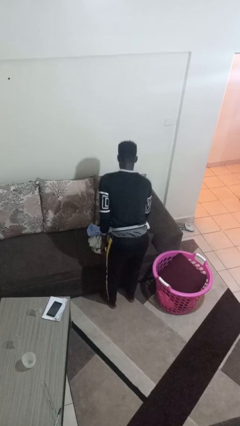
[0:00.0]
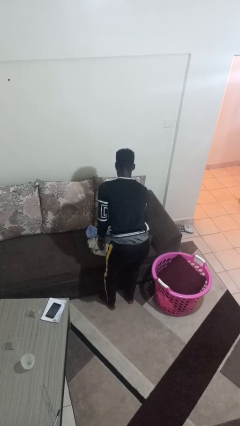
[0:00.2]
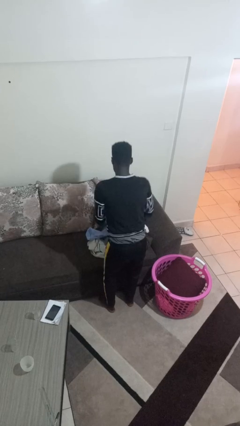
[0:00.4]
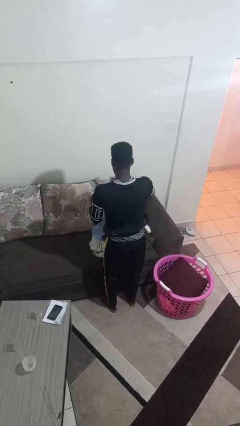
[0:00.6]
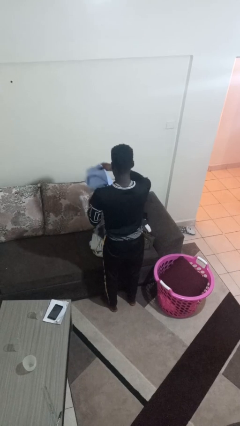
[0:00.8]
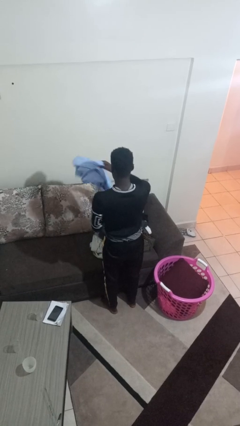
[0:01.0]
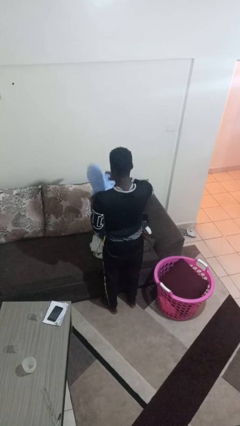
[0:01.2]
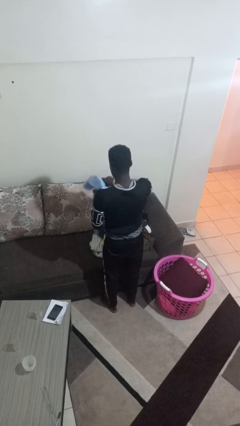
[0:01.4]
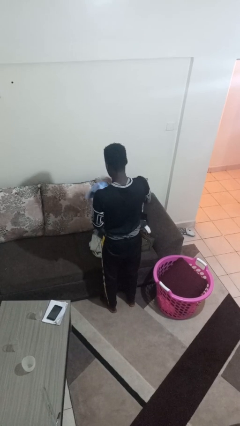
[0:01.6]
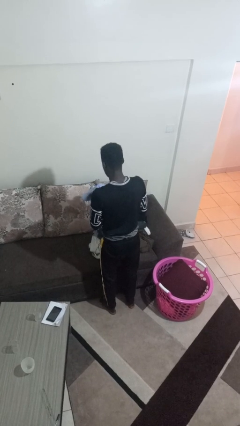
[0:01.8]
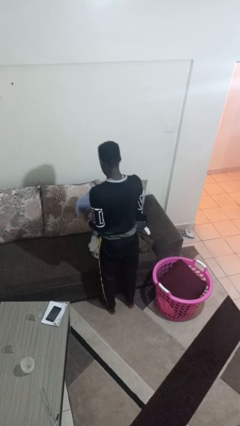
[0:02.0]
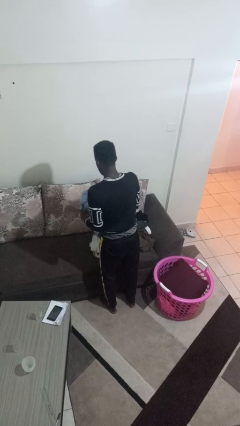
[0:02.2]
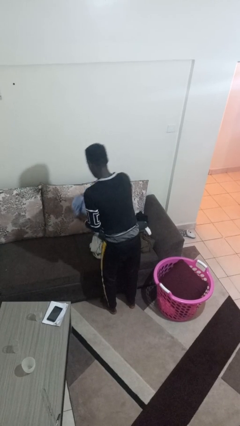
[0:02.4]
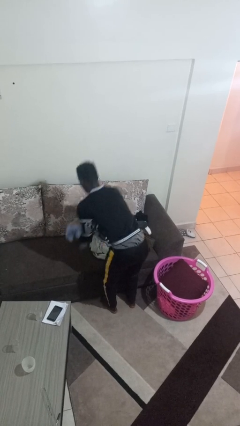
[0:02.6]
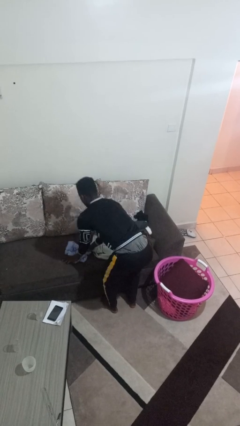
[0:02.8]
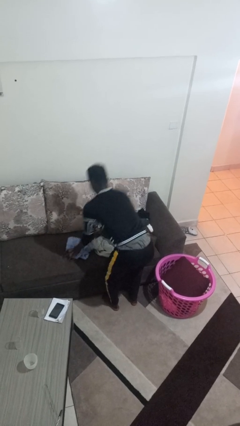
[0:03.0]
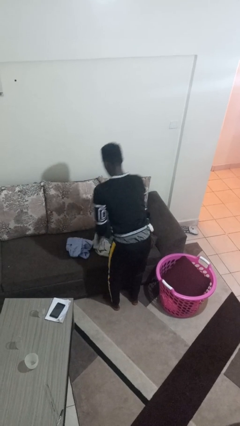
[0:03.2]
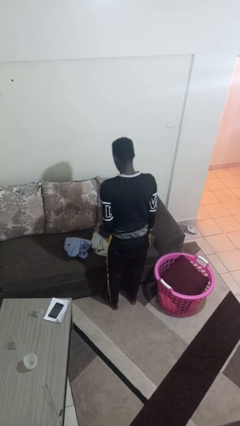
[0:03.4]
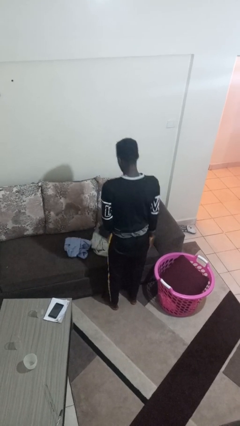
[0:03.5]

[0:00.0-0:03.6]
person folds shirt

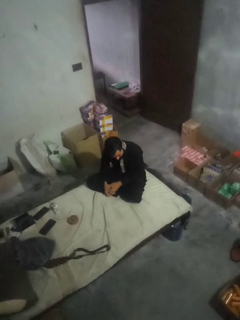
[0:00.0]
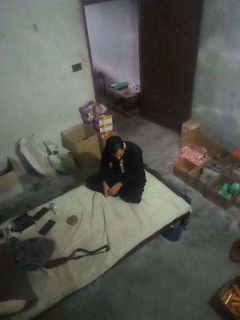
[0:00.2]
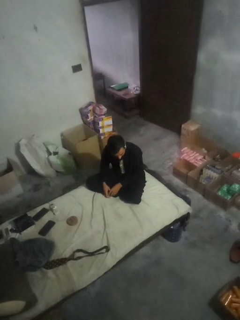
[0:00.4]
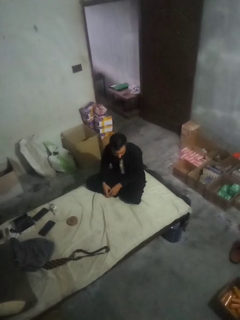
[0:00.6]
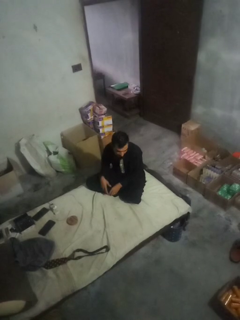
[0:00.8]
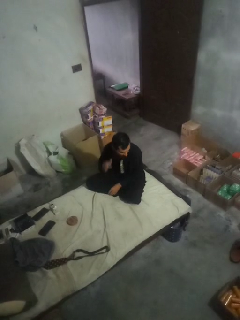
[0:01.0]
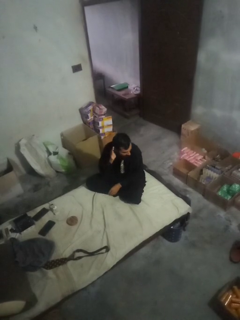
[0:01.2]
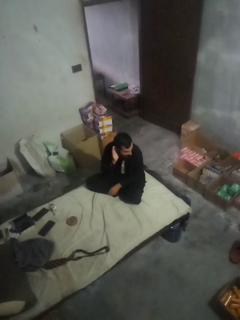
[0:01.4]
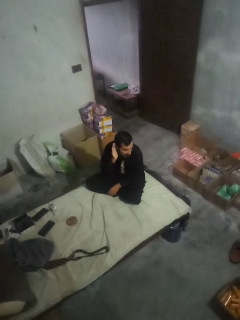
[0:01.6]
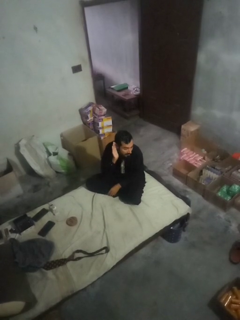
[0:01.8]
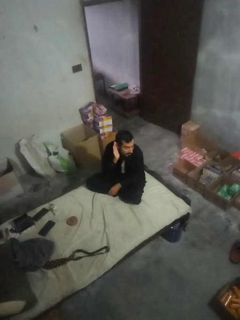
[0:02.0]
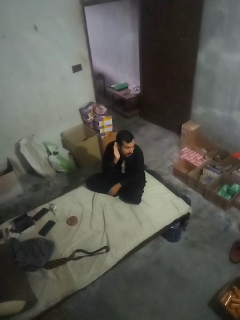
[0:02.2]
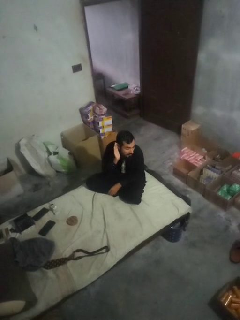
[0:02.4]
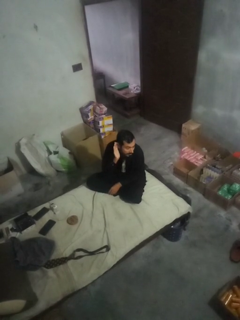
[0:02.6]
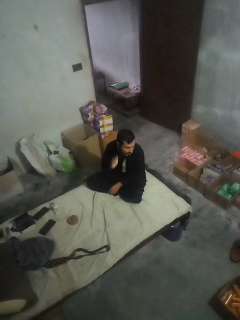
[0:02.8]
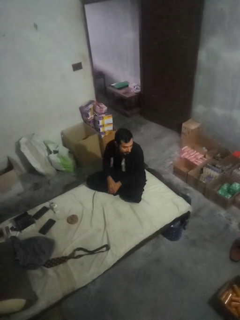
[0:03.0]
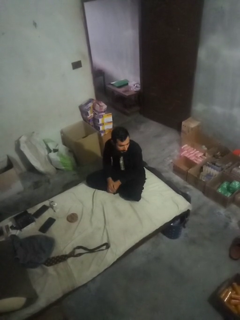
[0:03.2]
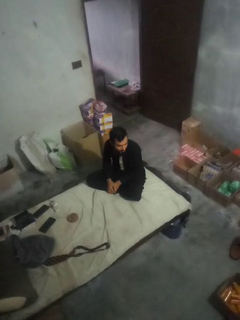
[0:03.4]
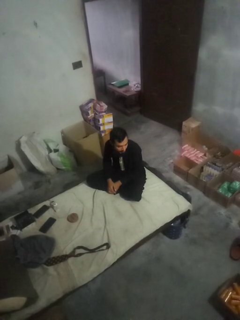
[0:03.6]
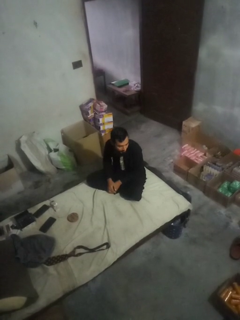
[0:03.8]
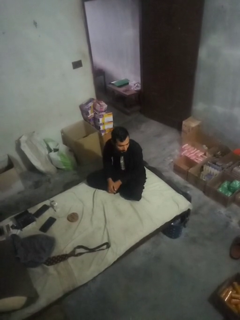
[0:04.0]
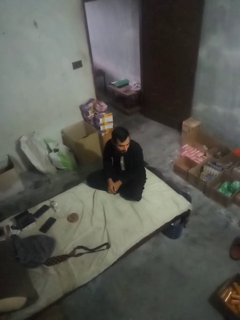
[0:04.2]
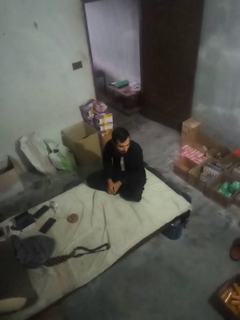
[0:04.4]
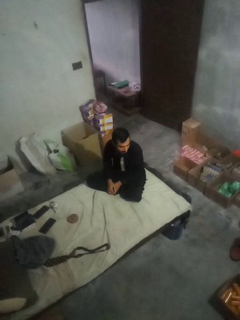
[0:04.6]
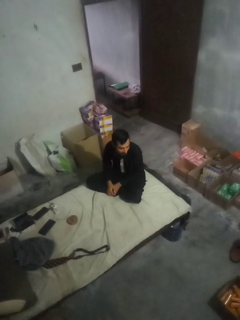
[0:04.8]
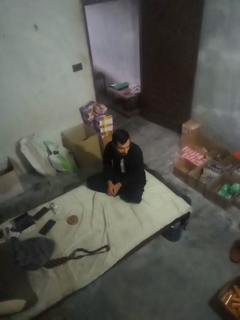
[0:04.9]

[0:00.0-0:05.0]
person gestures listen closely

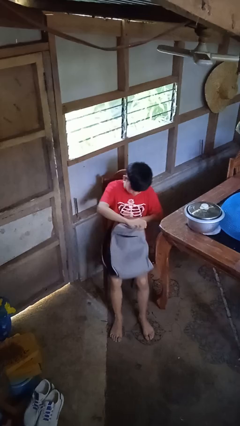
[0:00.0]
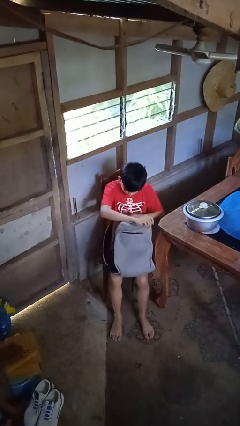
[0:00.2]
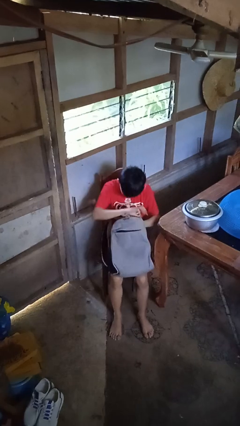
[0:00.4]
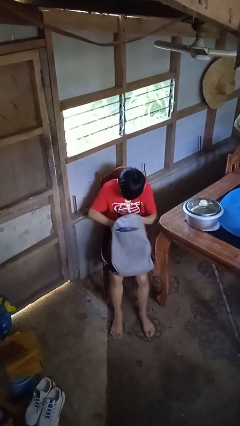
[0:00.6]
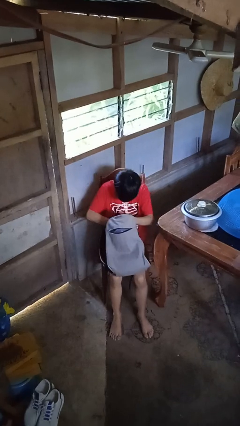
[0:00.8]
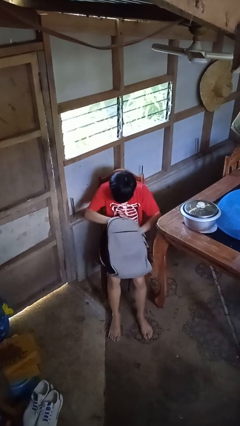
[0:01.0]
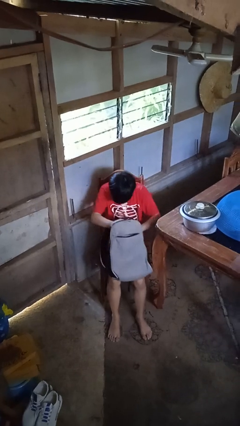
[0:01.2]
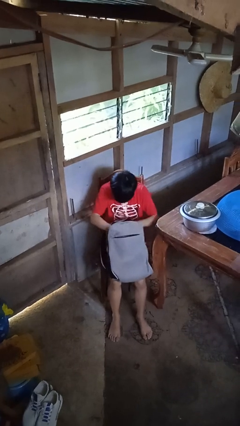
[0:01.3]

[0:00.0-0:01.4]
person searches in backpack

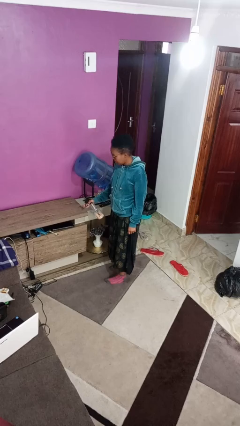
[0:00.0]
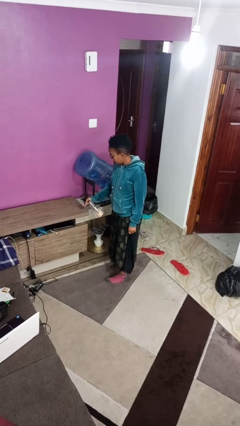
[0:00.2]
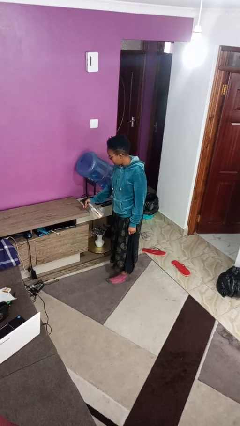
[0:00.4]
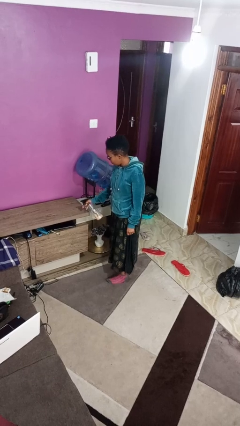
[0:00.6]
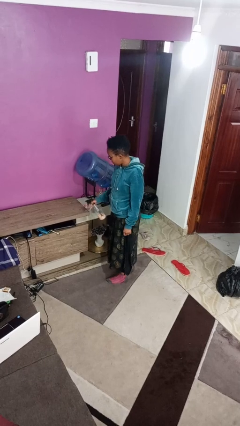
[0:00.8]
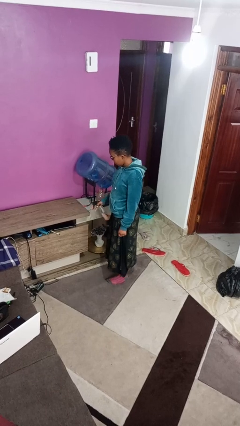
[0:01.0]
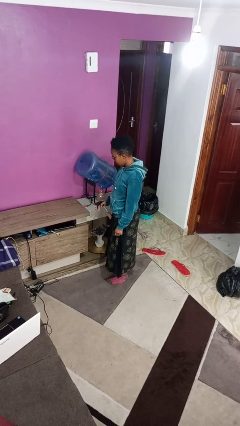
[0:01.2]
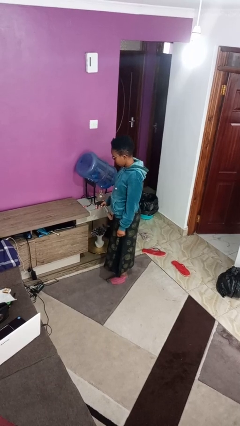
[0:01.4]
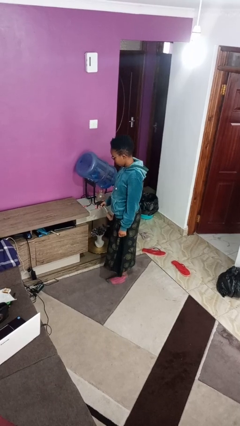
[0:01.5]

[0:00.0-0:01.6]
person sprays from bottle

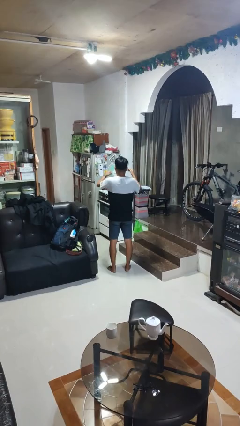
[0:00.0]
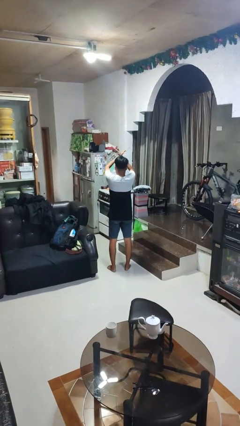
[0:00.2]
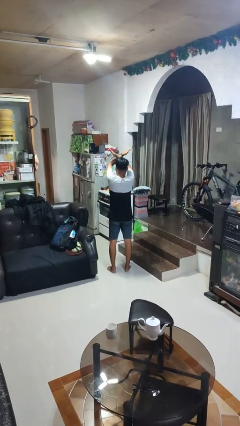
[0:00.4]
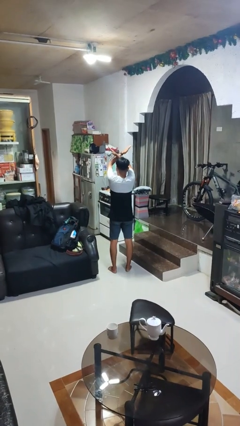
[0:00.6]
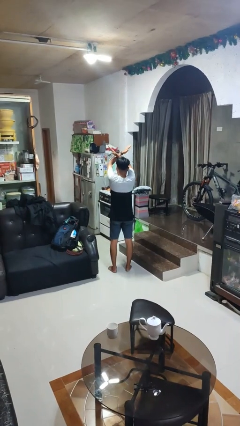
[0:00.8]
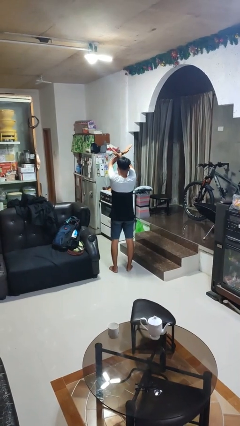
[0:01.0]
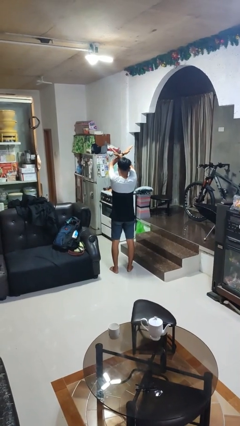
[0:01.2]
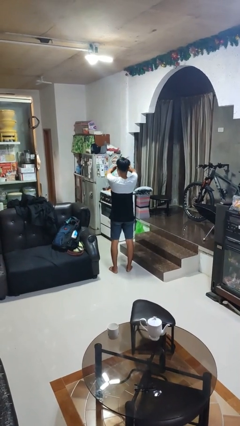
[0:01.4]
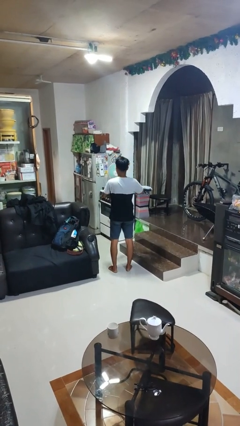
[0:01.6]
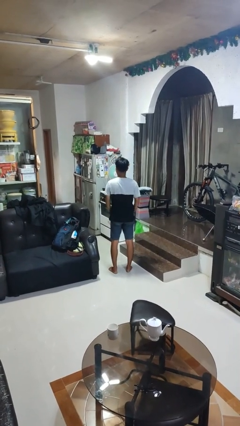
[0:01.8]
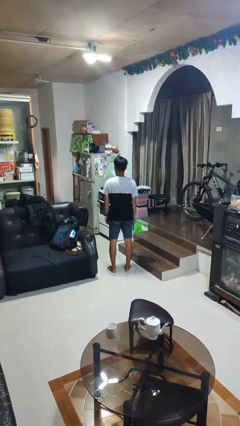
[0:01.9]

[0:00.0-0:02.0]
person gestures arms x

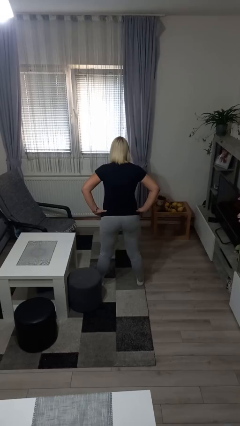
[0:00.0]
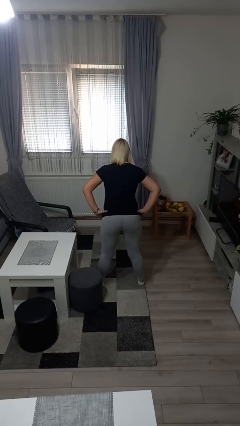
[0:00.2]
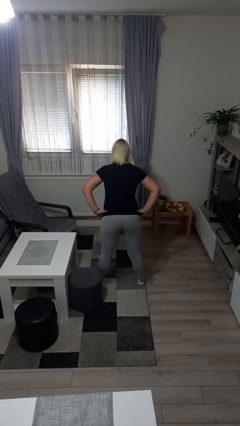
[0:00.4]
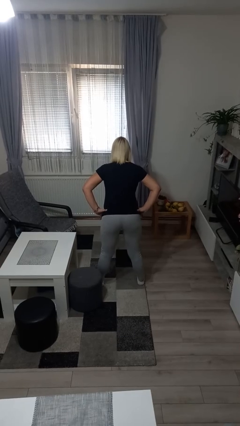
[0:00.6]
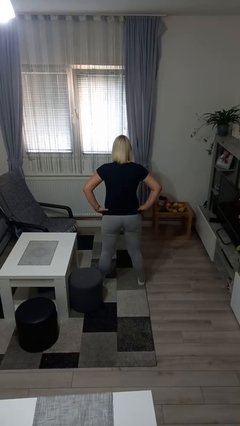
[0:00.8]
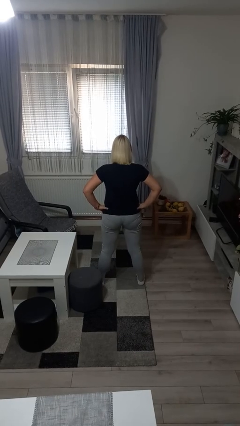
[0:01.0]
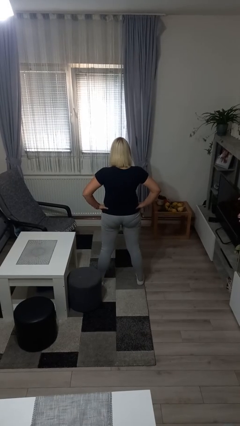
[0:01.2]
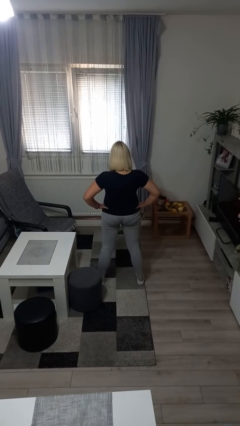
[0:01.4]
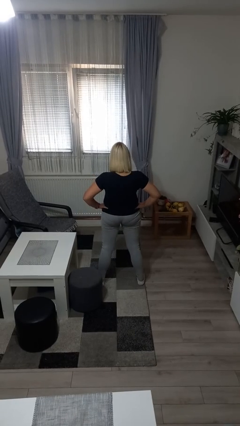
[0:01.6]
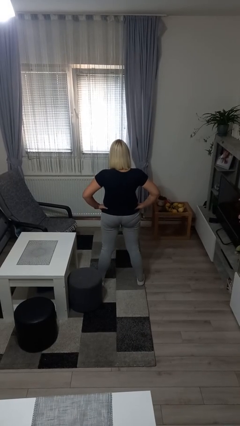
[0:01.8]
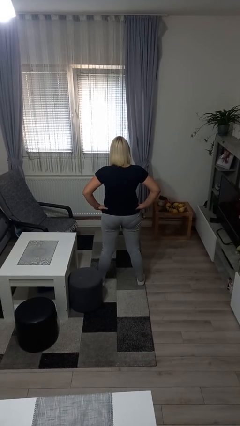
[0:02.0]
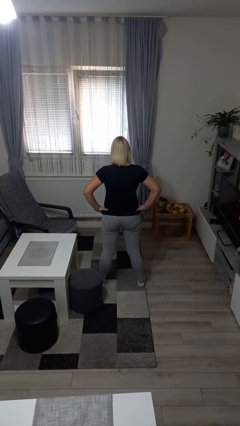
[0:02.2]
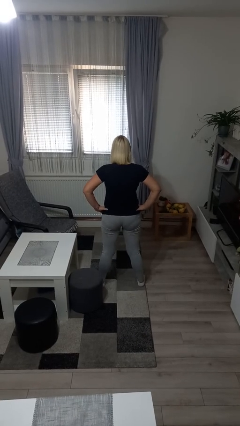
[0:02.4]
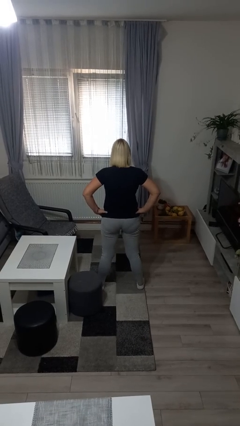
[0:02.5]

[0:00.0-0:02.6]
person wiggles hips

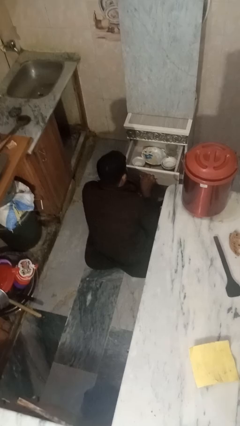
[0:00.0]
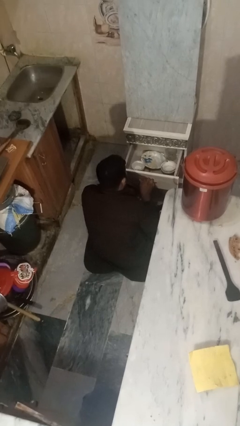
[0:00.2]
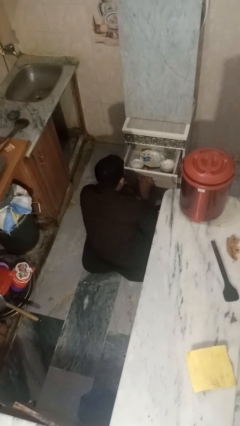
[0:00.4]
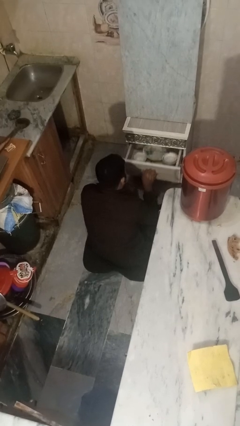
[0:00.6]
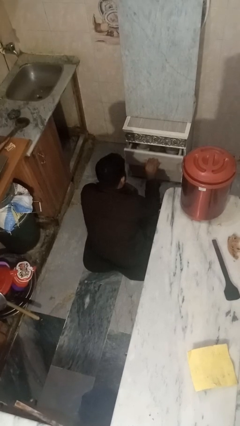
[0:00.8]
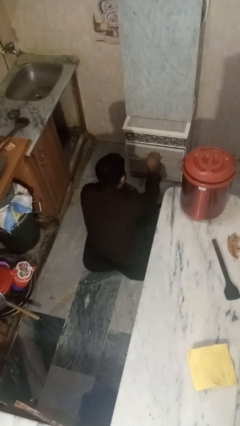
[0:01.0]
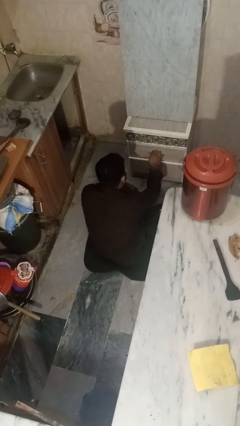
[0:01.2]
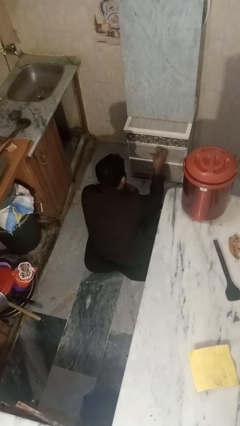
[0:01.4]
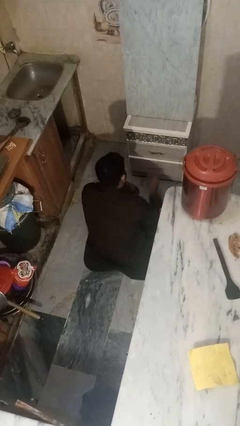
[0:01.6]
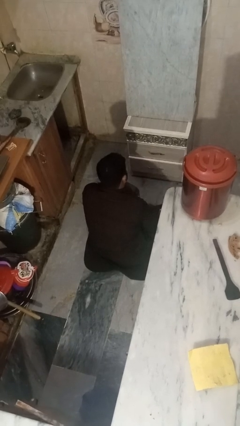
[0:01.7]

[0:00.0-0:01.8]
person closes kitchen drawer
